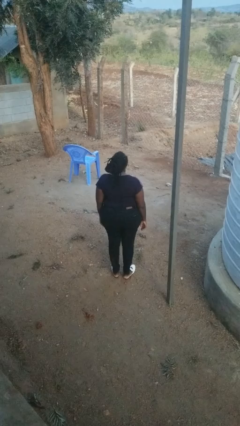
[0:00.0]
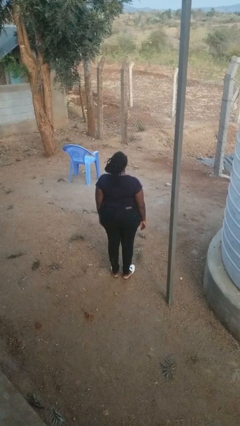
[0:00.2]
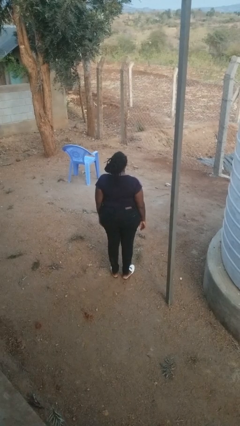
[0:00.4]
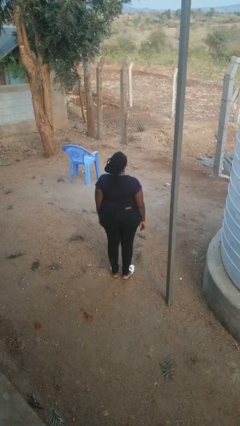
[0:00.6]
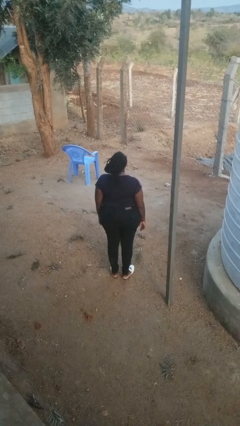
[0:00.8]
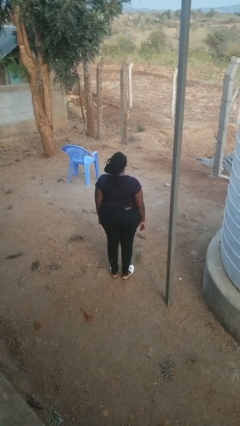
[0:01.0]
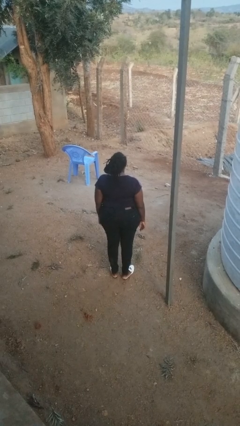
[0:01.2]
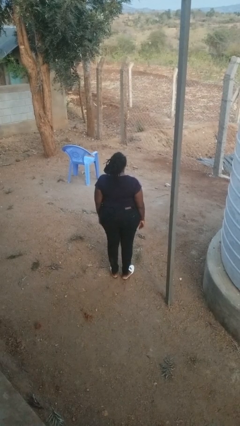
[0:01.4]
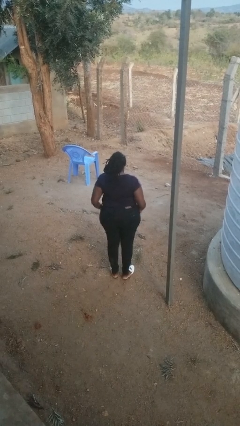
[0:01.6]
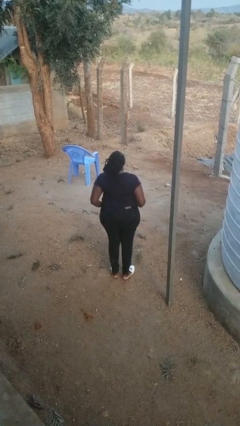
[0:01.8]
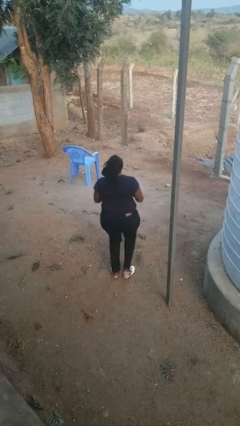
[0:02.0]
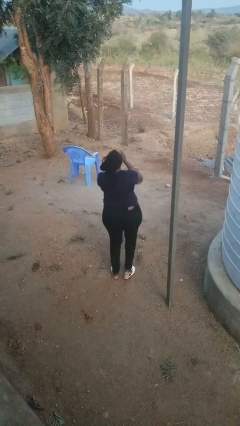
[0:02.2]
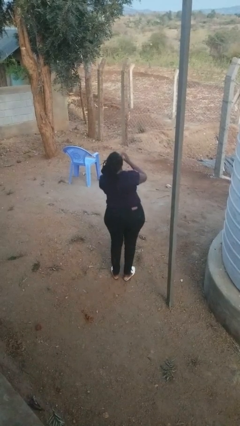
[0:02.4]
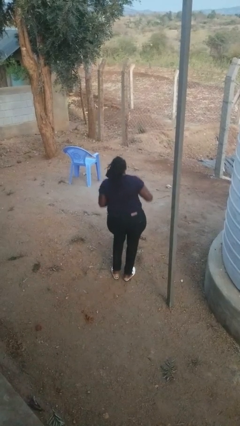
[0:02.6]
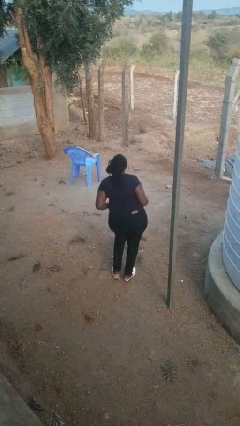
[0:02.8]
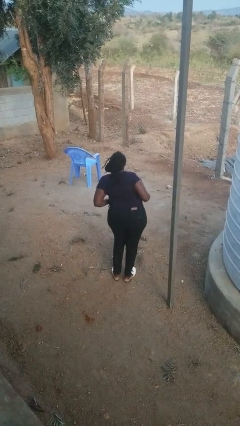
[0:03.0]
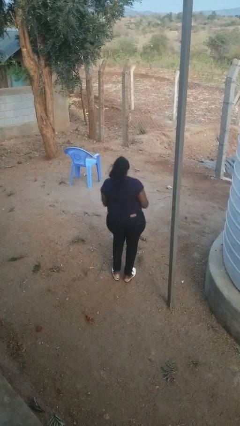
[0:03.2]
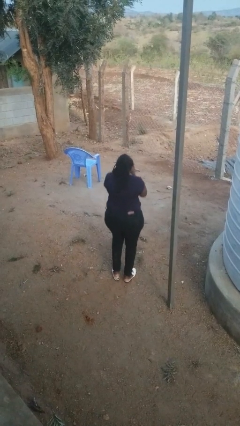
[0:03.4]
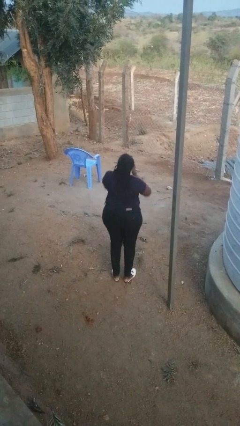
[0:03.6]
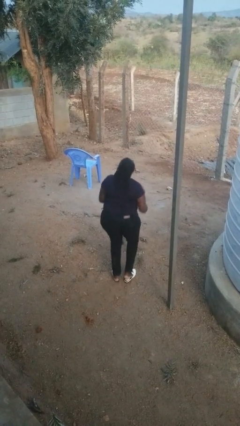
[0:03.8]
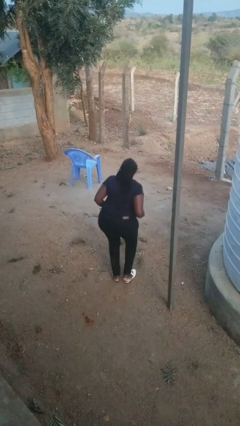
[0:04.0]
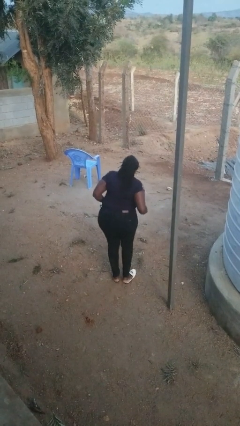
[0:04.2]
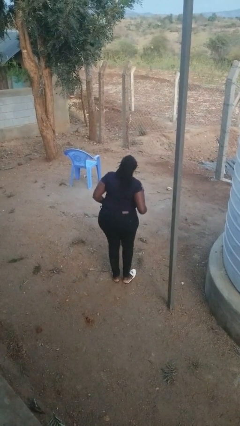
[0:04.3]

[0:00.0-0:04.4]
person dances in place

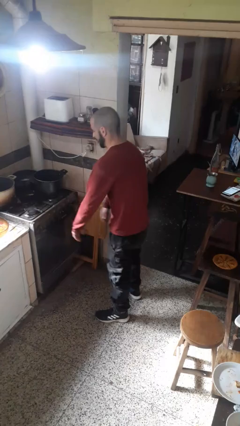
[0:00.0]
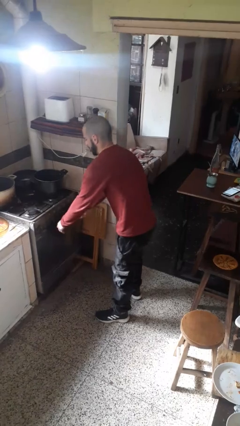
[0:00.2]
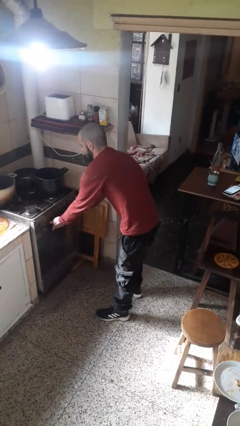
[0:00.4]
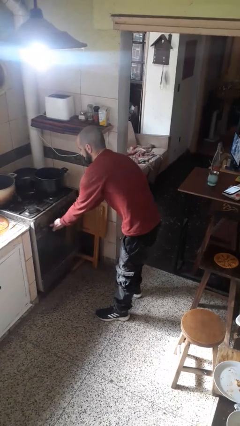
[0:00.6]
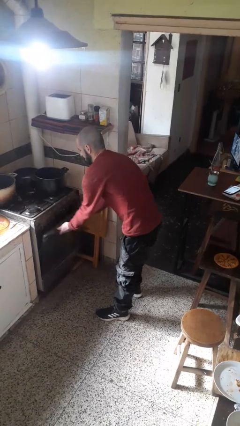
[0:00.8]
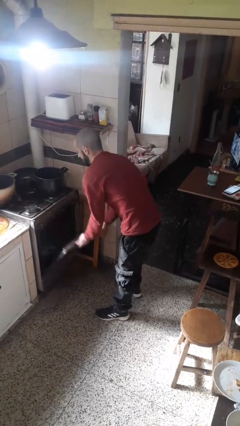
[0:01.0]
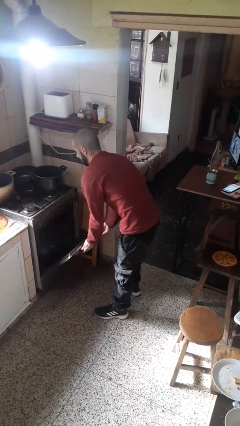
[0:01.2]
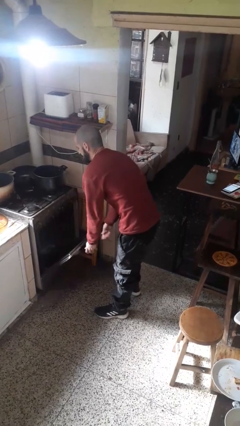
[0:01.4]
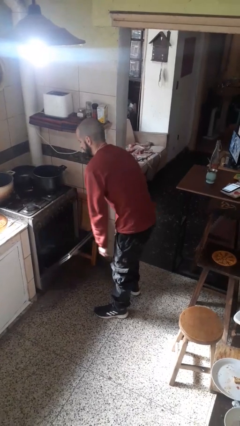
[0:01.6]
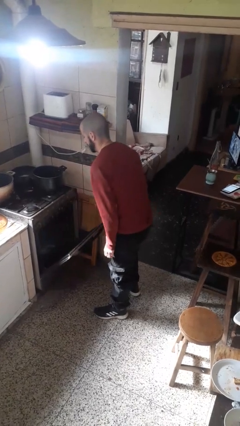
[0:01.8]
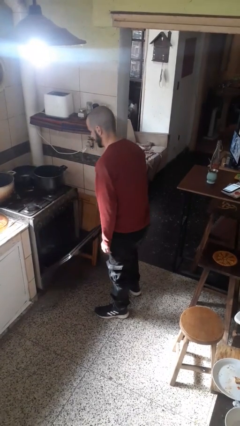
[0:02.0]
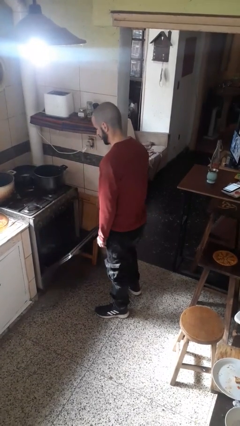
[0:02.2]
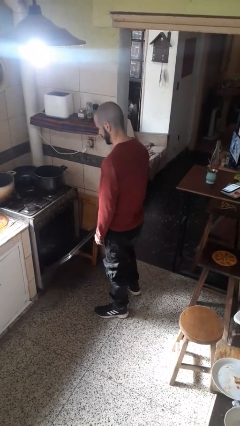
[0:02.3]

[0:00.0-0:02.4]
person opens oven door

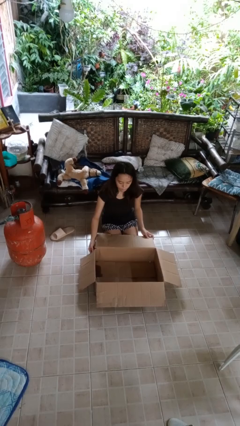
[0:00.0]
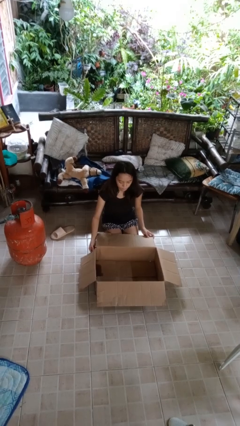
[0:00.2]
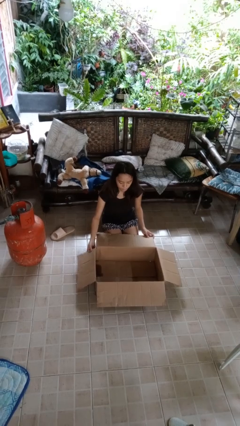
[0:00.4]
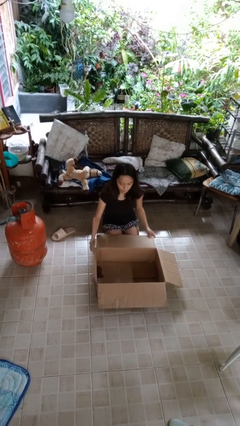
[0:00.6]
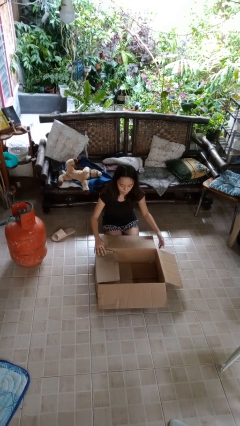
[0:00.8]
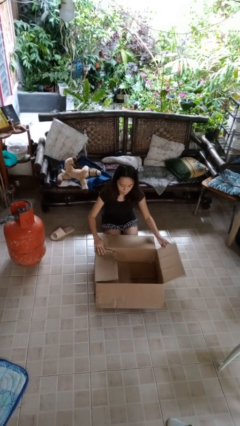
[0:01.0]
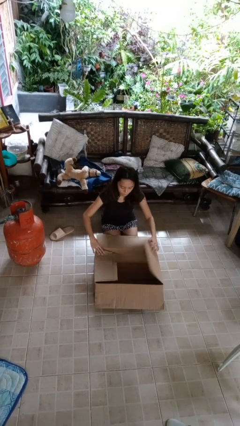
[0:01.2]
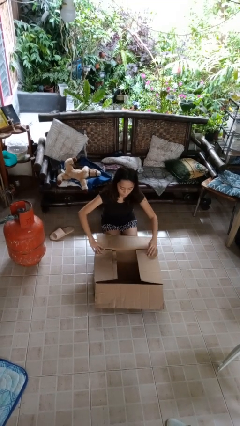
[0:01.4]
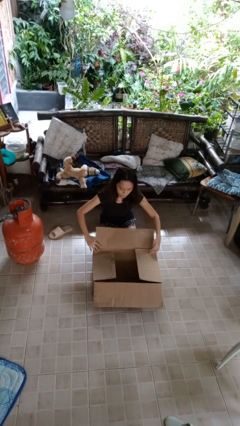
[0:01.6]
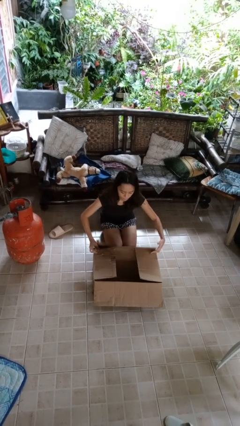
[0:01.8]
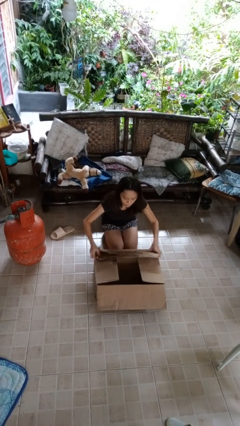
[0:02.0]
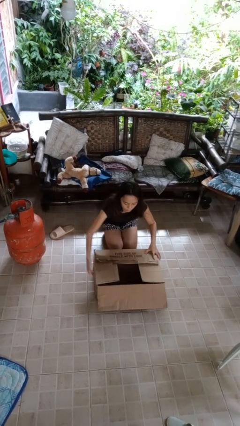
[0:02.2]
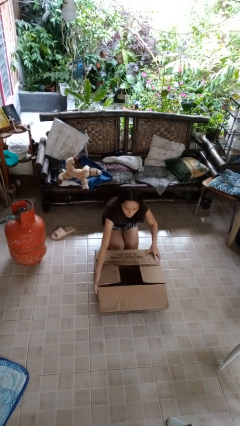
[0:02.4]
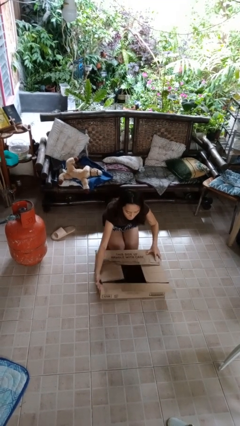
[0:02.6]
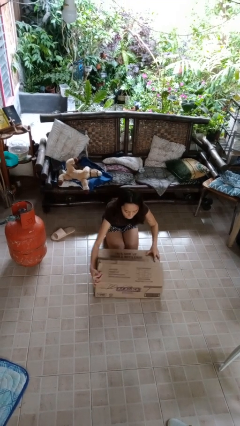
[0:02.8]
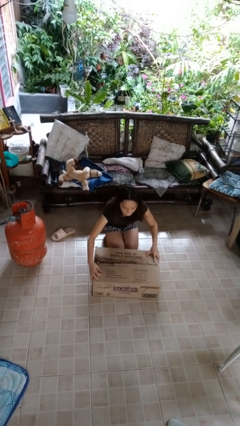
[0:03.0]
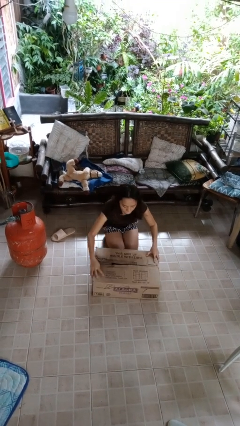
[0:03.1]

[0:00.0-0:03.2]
person closes box

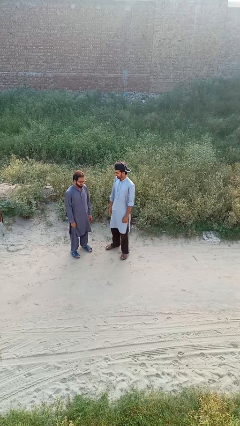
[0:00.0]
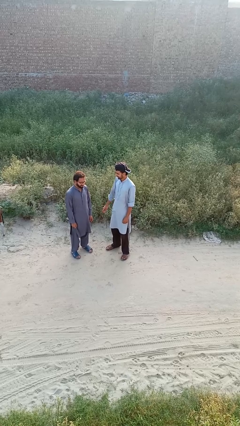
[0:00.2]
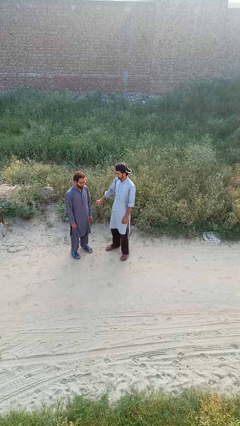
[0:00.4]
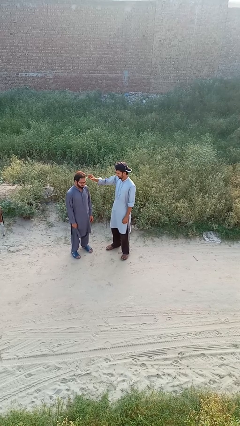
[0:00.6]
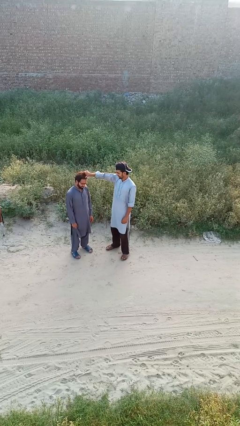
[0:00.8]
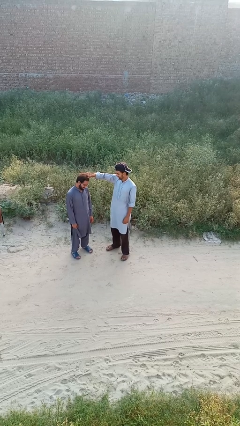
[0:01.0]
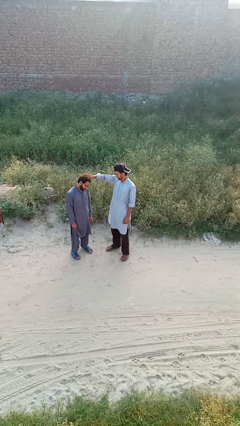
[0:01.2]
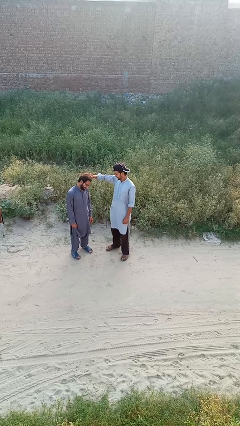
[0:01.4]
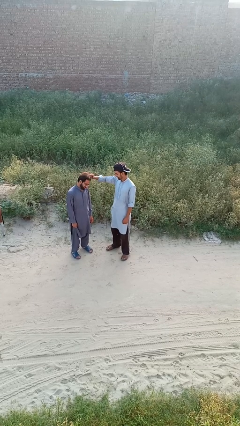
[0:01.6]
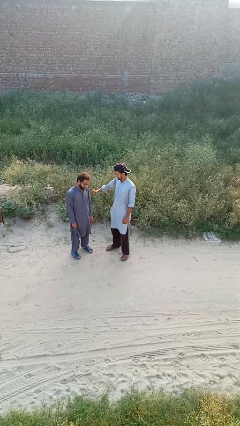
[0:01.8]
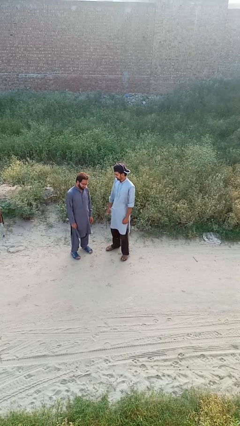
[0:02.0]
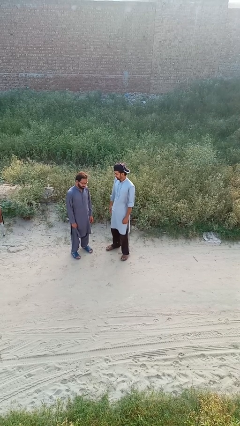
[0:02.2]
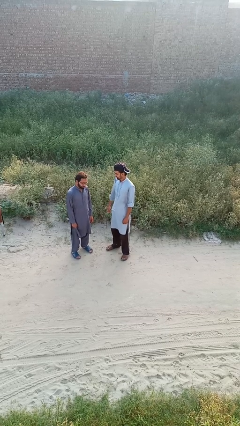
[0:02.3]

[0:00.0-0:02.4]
person grabs person by hair

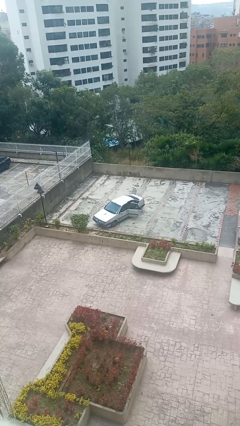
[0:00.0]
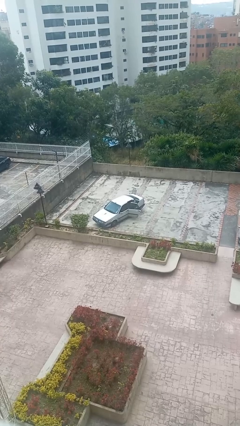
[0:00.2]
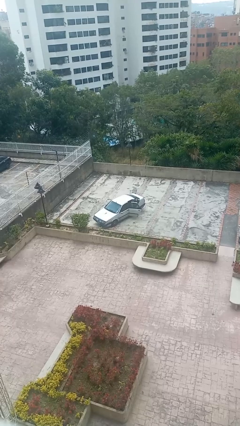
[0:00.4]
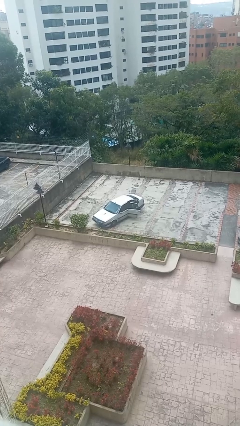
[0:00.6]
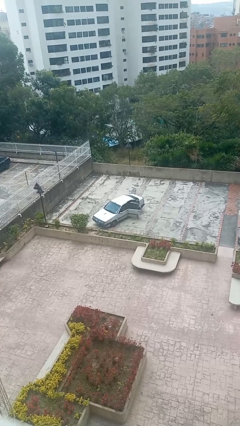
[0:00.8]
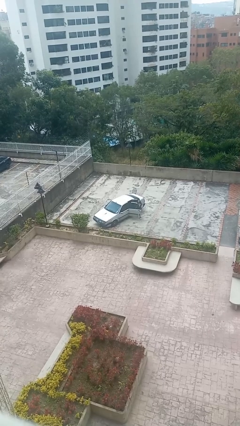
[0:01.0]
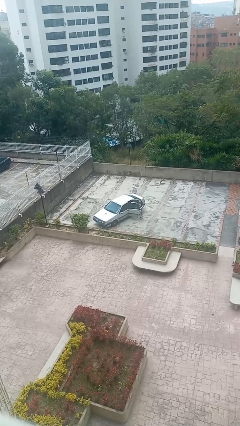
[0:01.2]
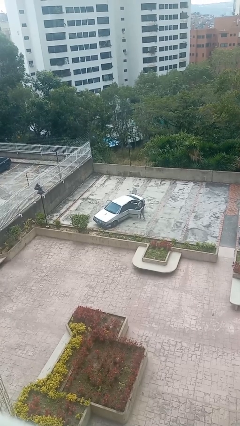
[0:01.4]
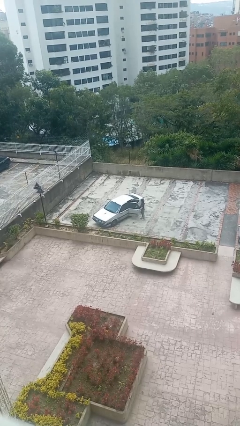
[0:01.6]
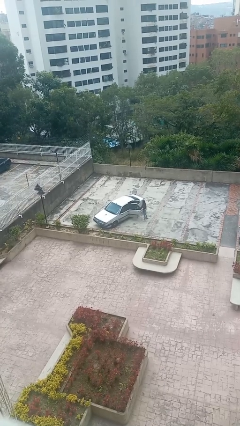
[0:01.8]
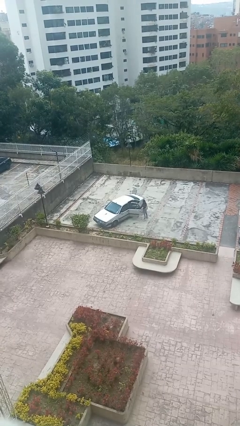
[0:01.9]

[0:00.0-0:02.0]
car drops off person

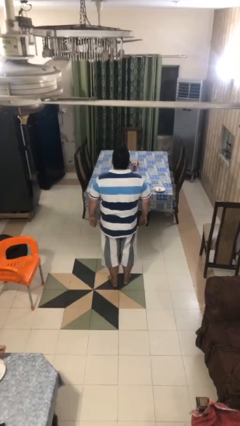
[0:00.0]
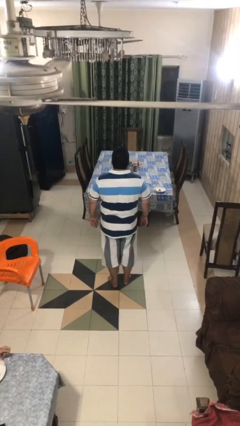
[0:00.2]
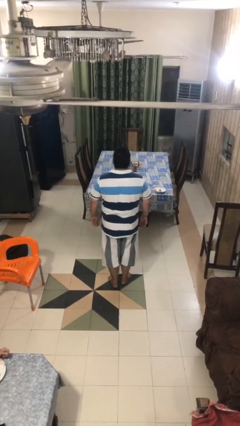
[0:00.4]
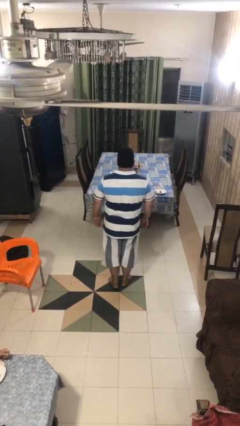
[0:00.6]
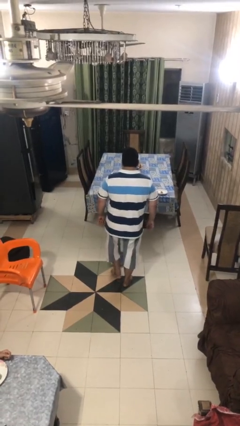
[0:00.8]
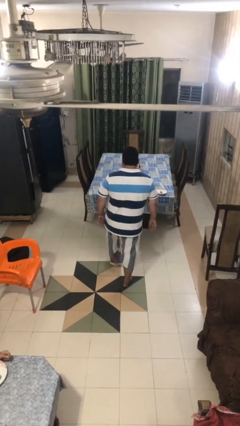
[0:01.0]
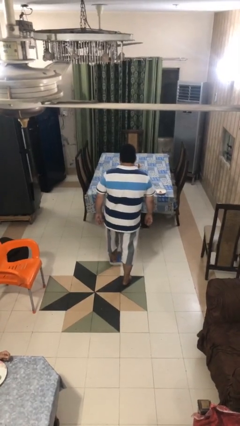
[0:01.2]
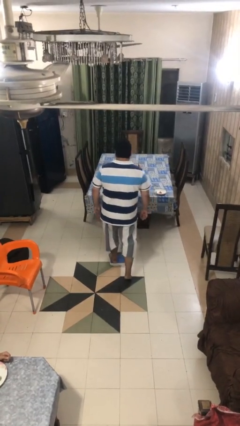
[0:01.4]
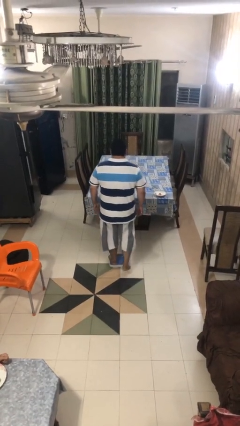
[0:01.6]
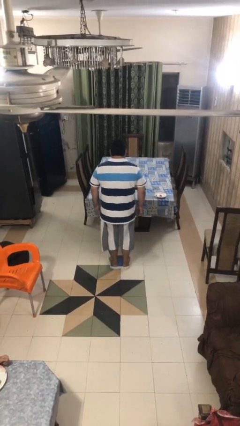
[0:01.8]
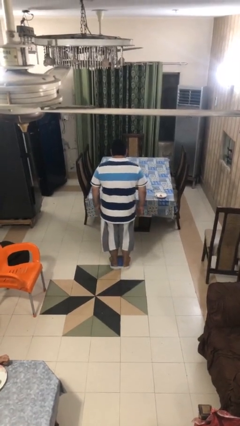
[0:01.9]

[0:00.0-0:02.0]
person uses bodyweight scale

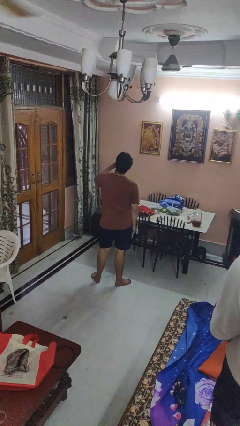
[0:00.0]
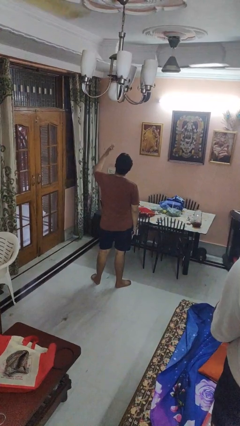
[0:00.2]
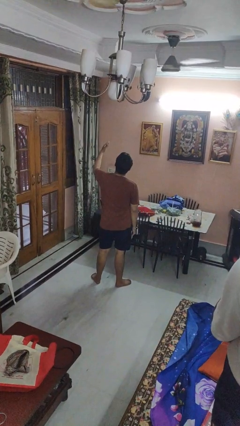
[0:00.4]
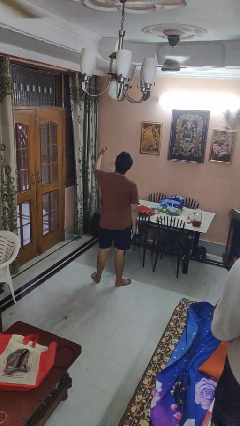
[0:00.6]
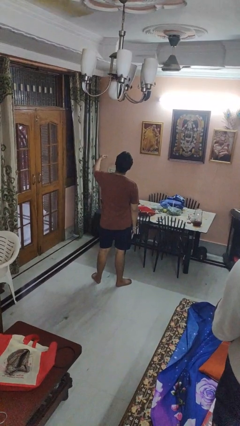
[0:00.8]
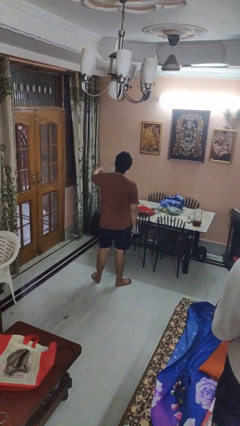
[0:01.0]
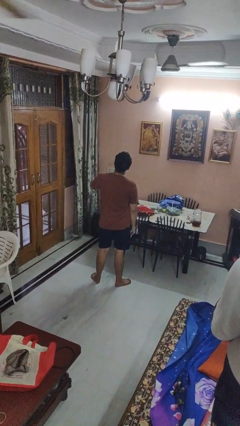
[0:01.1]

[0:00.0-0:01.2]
person gestures blow kiss
